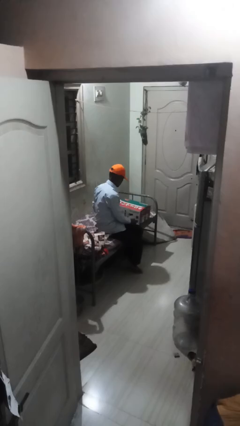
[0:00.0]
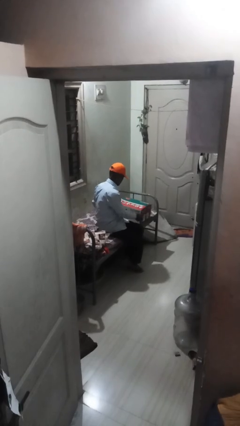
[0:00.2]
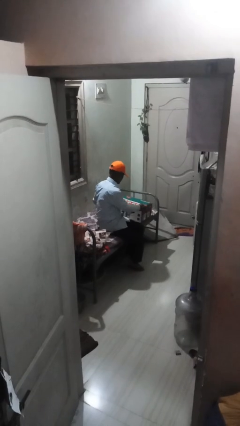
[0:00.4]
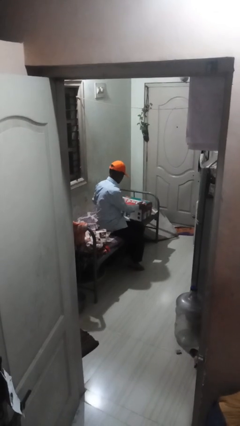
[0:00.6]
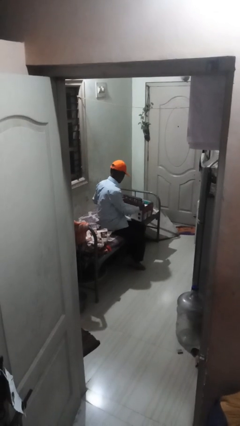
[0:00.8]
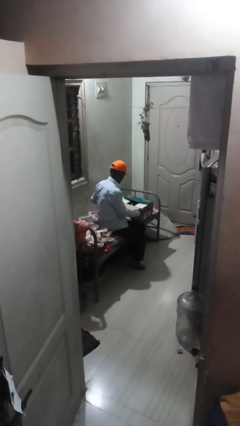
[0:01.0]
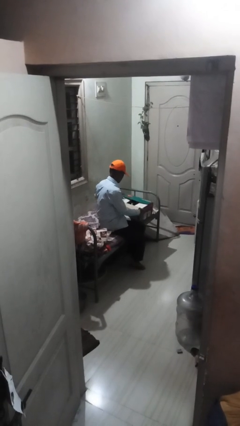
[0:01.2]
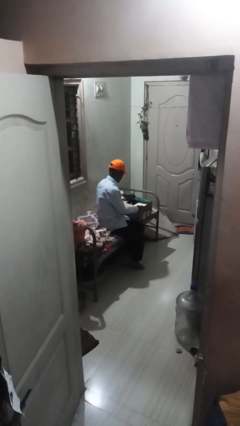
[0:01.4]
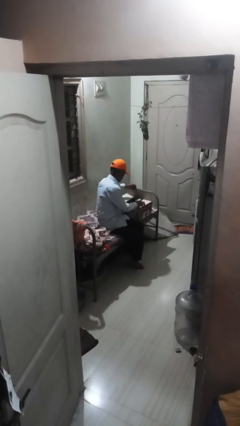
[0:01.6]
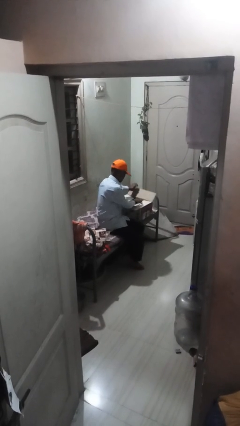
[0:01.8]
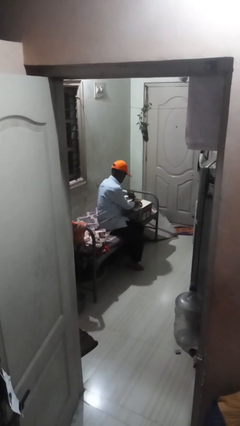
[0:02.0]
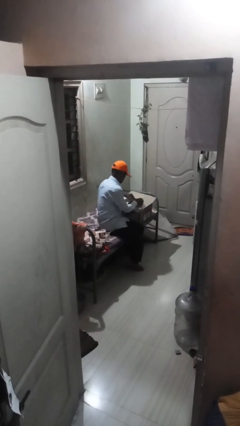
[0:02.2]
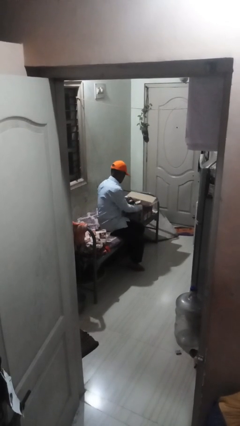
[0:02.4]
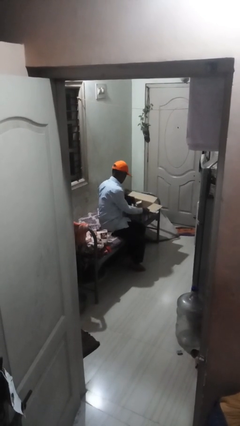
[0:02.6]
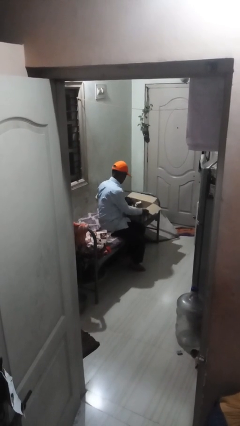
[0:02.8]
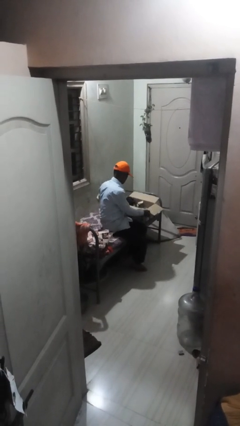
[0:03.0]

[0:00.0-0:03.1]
person opens box

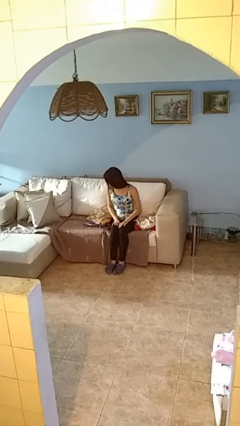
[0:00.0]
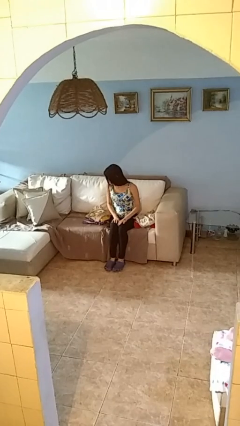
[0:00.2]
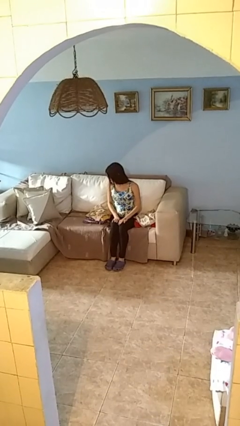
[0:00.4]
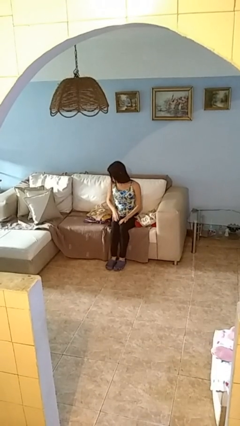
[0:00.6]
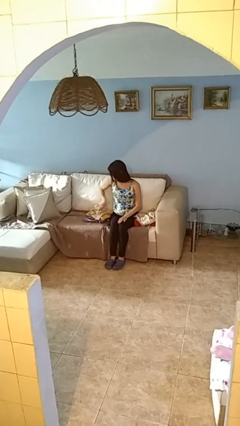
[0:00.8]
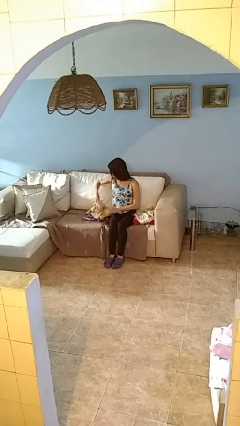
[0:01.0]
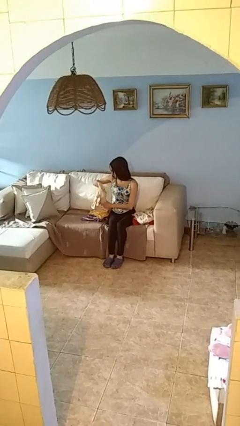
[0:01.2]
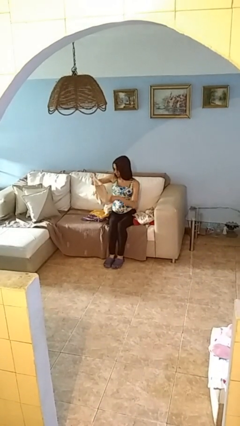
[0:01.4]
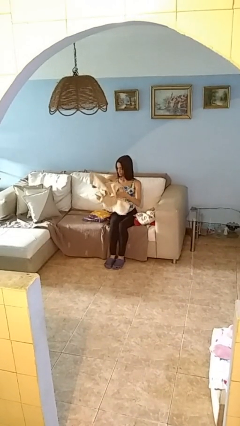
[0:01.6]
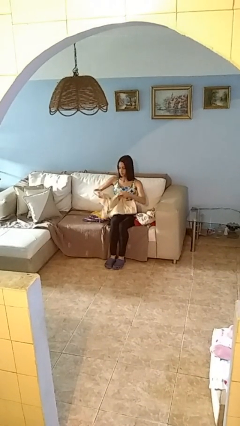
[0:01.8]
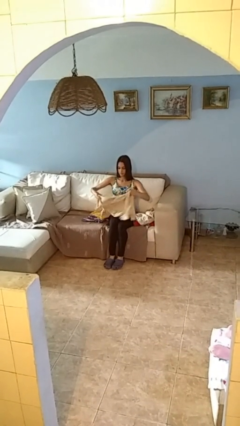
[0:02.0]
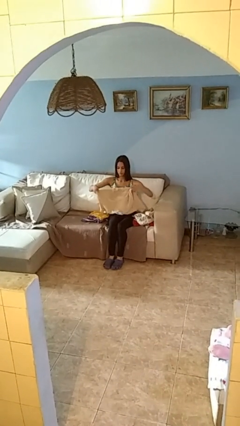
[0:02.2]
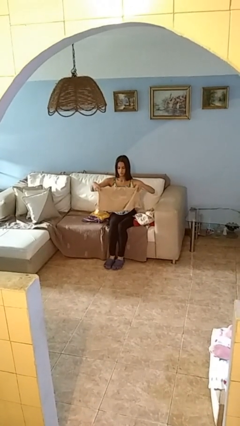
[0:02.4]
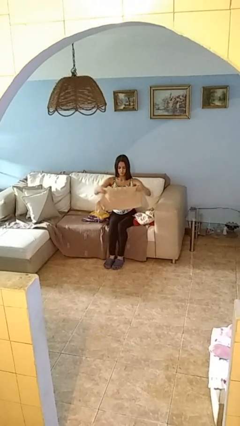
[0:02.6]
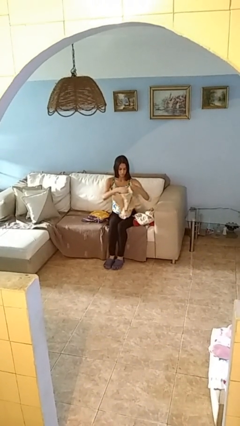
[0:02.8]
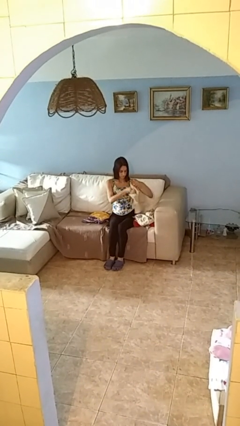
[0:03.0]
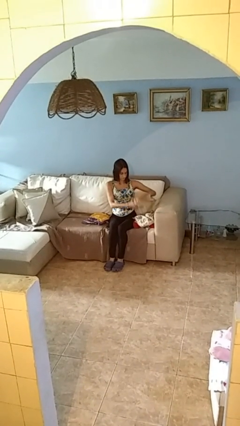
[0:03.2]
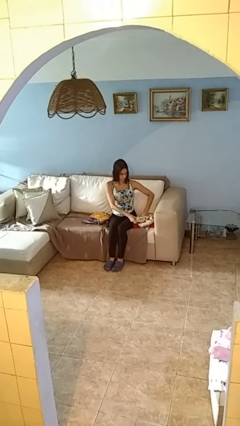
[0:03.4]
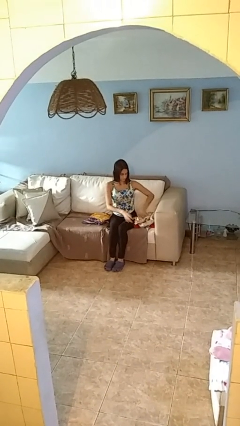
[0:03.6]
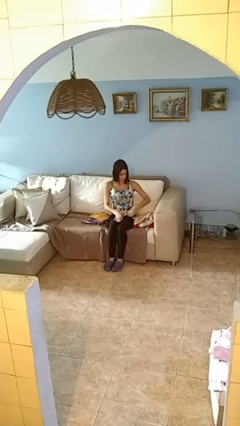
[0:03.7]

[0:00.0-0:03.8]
person folds shirt

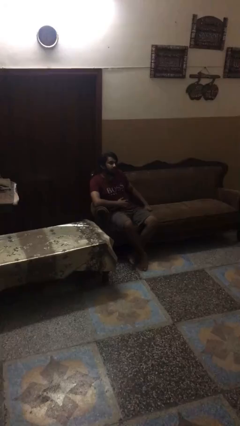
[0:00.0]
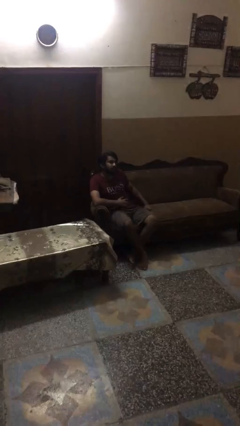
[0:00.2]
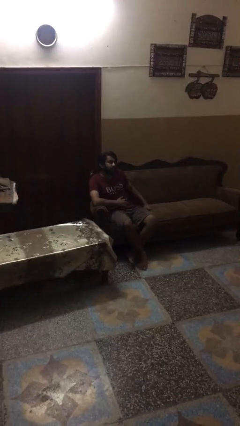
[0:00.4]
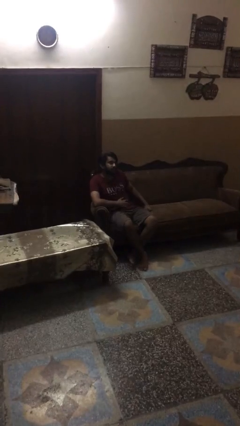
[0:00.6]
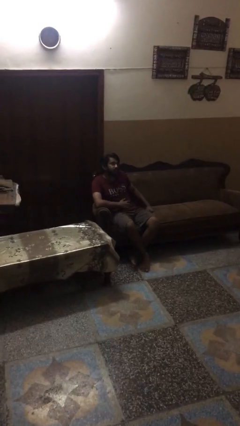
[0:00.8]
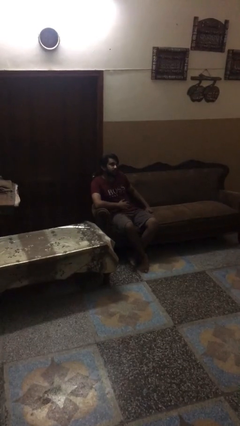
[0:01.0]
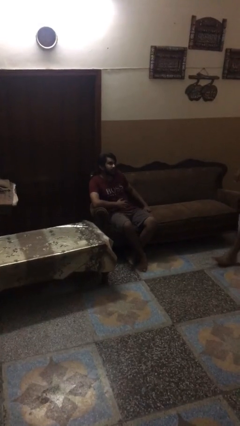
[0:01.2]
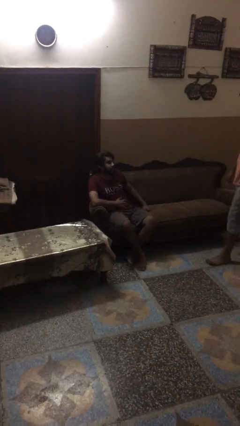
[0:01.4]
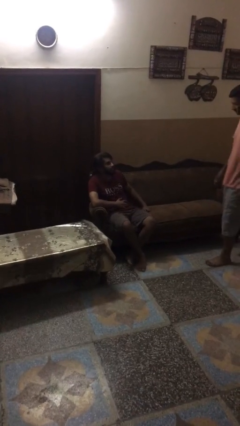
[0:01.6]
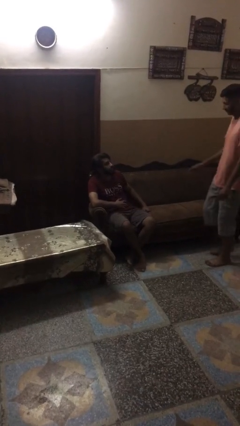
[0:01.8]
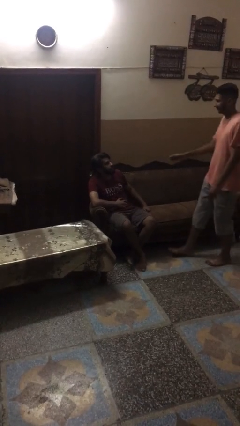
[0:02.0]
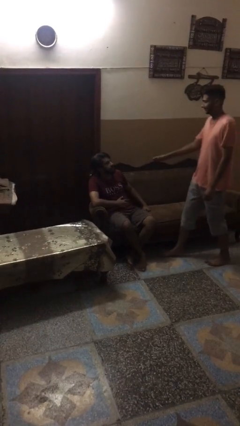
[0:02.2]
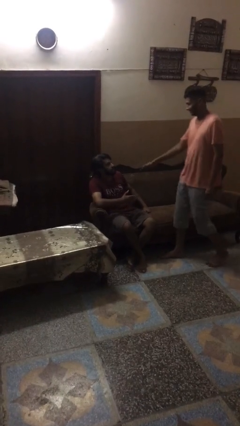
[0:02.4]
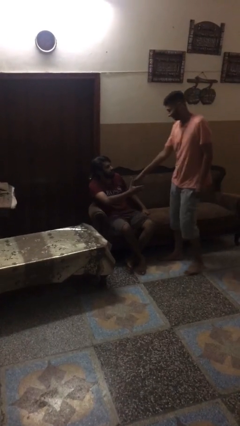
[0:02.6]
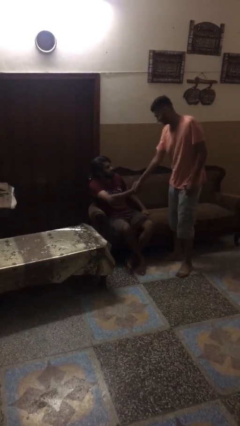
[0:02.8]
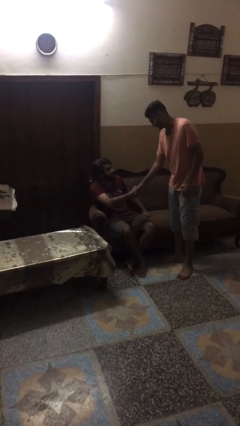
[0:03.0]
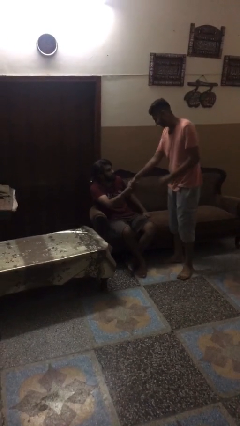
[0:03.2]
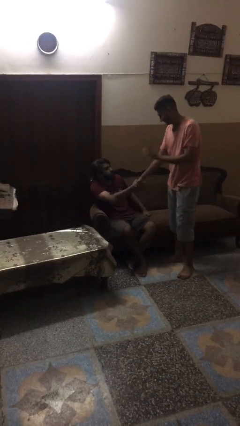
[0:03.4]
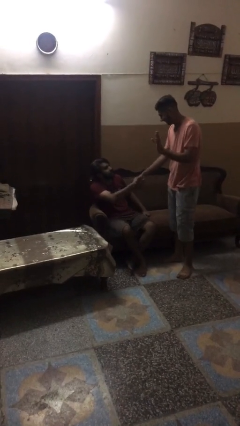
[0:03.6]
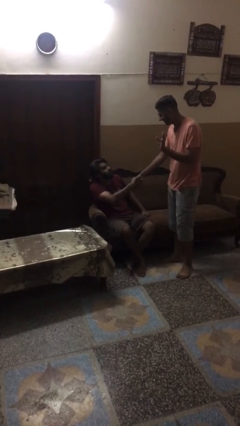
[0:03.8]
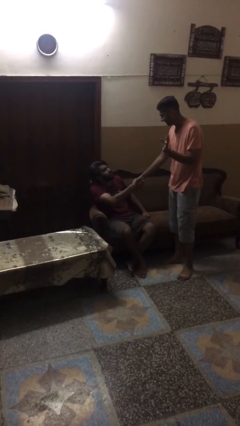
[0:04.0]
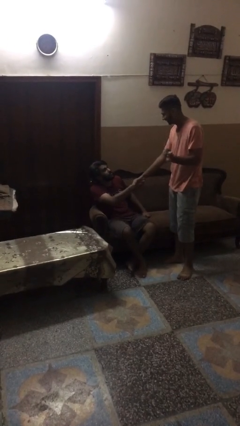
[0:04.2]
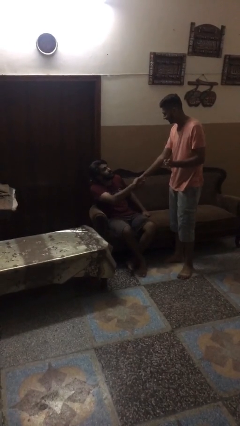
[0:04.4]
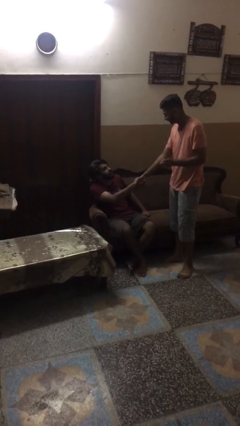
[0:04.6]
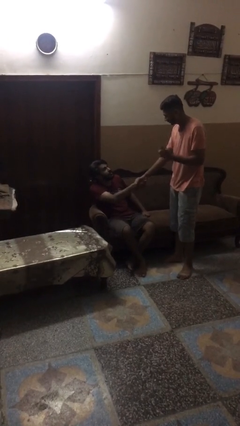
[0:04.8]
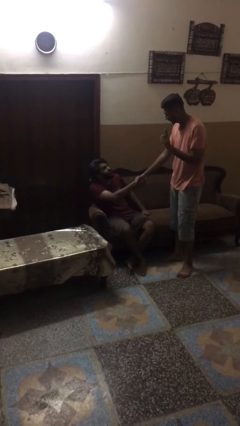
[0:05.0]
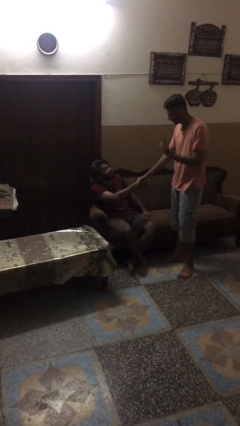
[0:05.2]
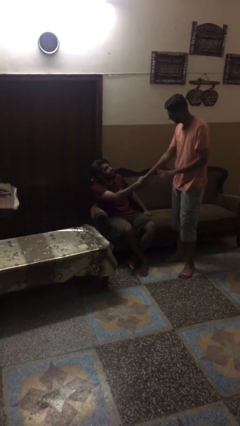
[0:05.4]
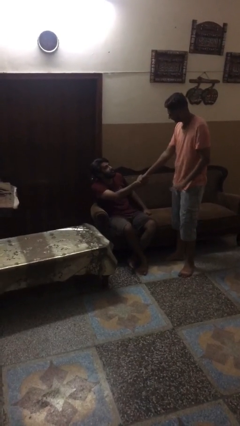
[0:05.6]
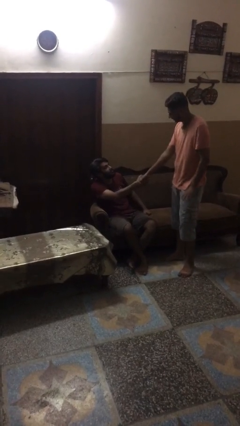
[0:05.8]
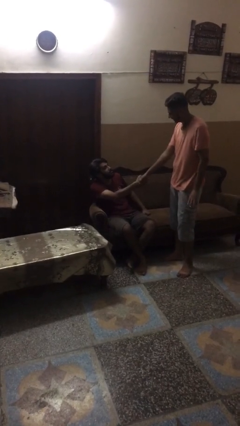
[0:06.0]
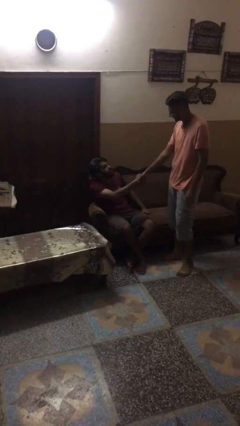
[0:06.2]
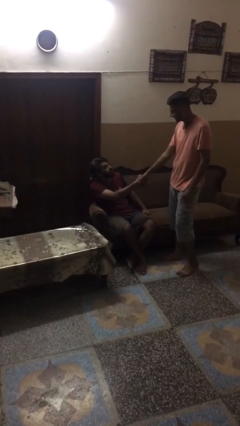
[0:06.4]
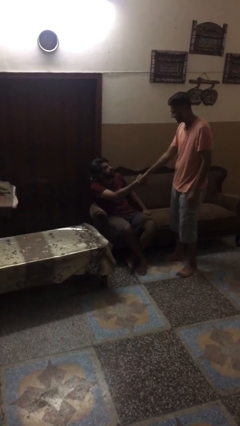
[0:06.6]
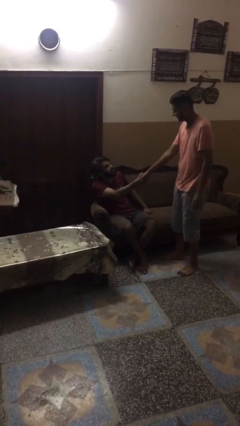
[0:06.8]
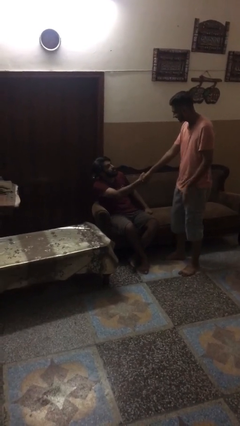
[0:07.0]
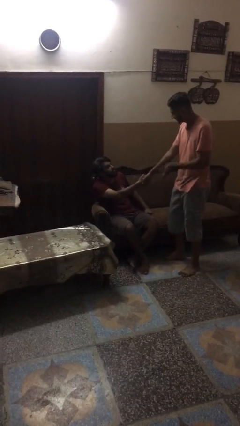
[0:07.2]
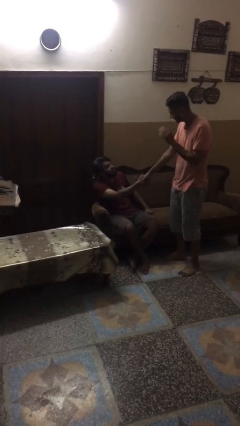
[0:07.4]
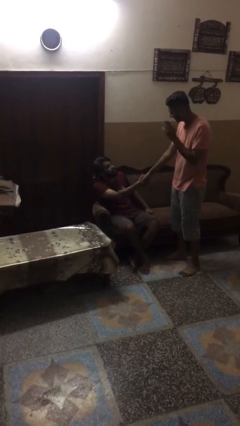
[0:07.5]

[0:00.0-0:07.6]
person shakes hand

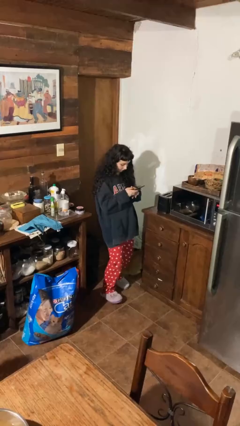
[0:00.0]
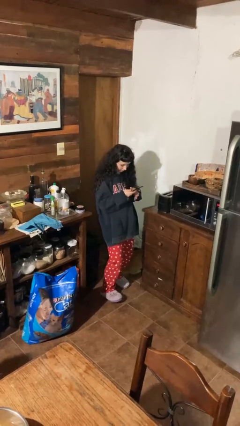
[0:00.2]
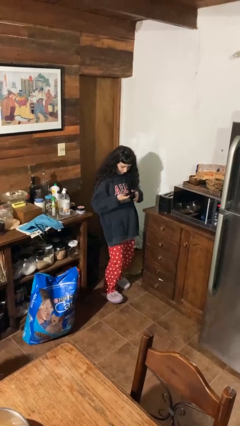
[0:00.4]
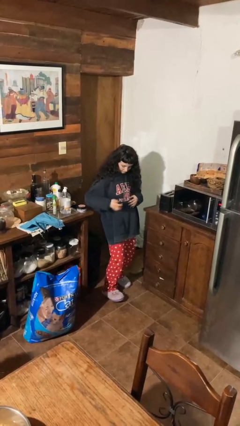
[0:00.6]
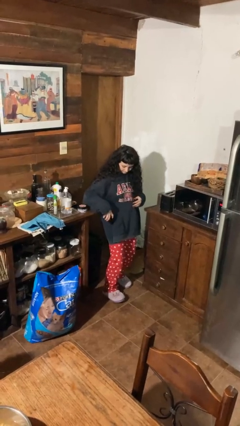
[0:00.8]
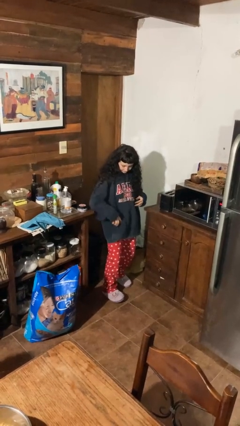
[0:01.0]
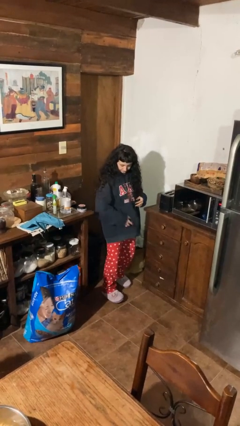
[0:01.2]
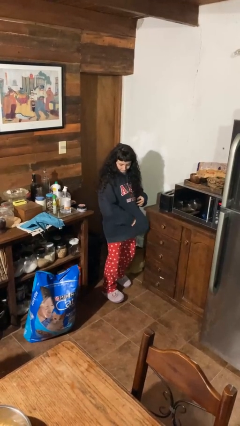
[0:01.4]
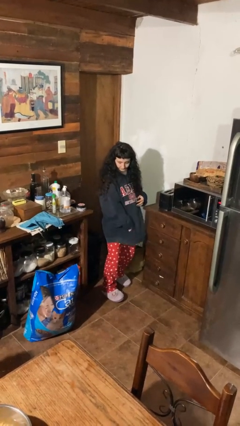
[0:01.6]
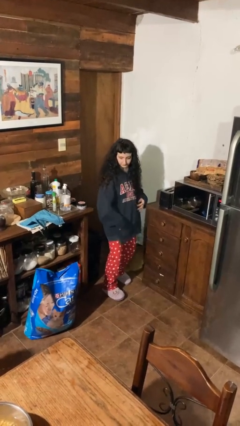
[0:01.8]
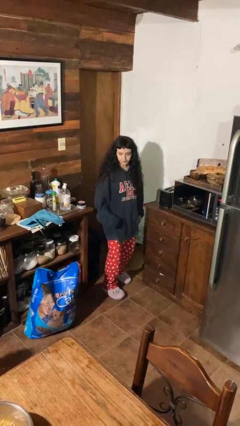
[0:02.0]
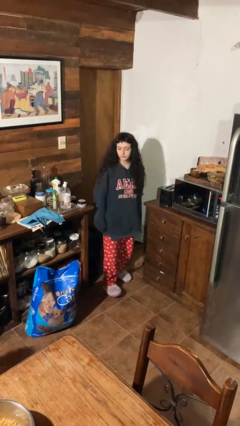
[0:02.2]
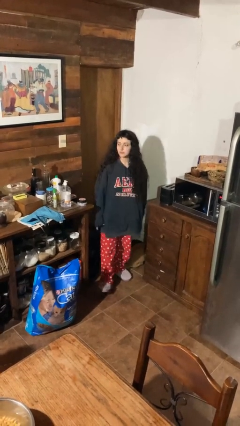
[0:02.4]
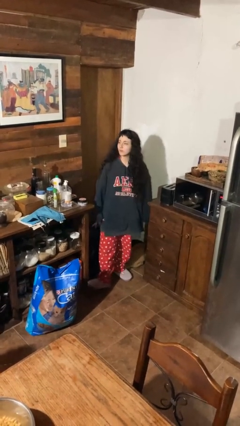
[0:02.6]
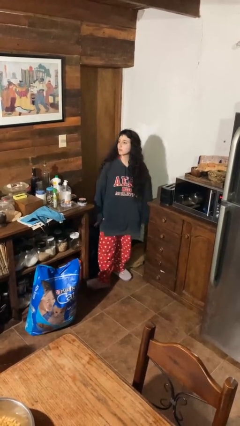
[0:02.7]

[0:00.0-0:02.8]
person puts phone into pocket
